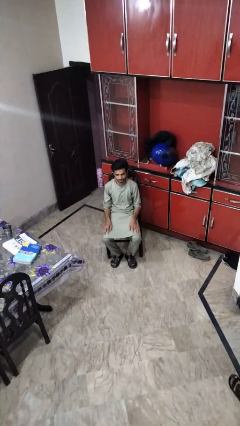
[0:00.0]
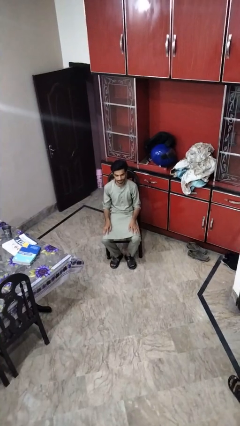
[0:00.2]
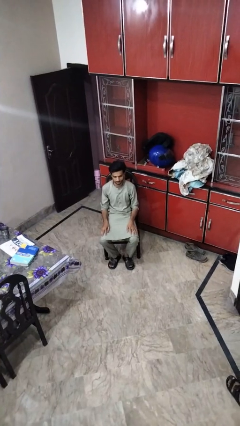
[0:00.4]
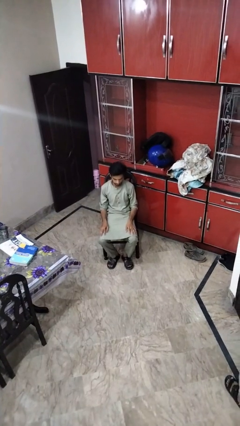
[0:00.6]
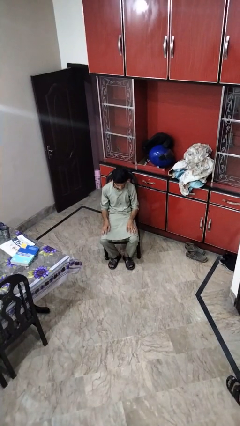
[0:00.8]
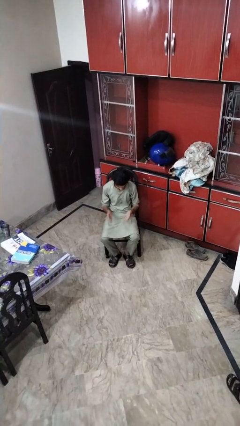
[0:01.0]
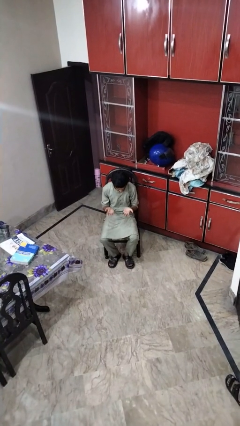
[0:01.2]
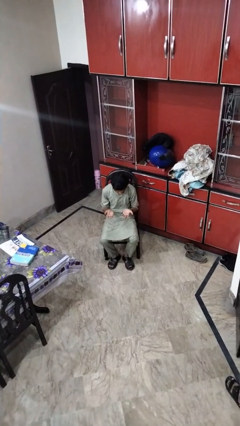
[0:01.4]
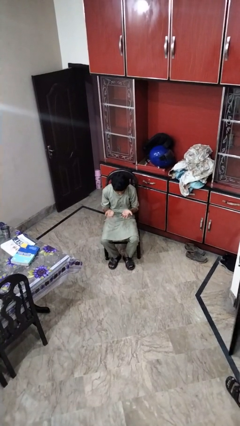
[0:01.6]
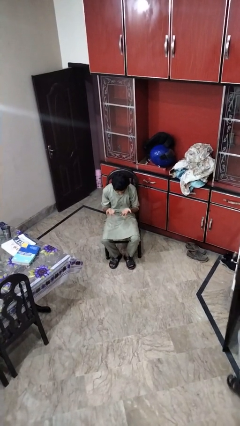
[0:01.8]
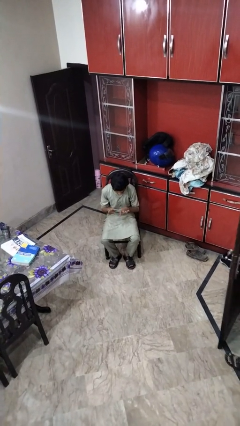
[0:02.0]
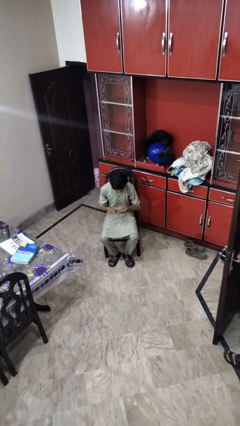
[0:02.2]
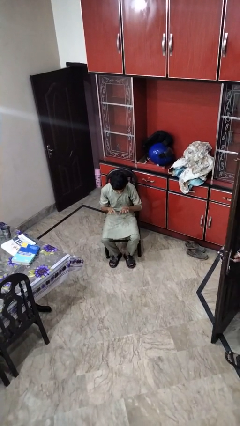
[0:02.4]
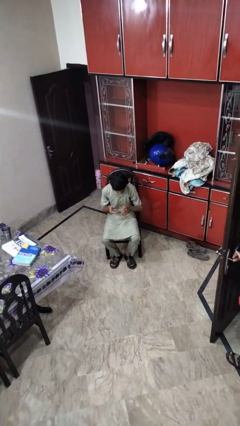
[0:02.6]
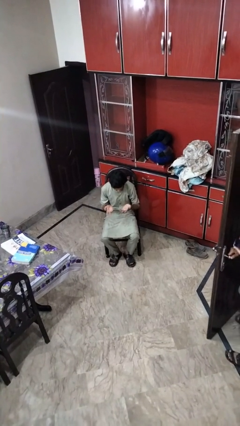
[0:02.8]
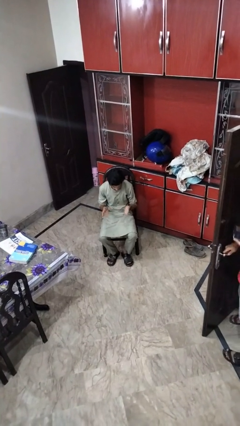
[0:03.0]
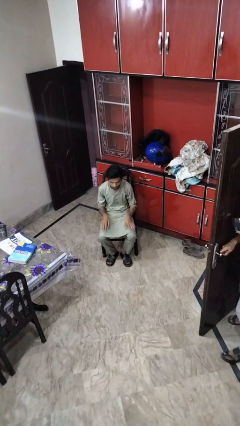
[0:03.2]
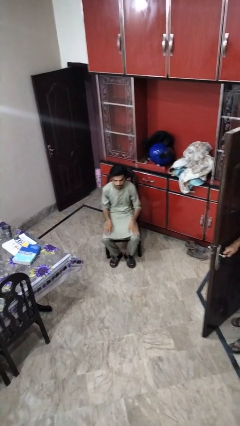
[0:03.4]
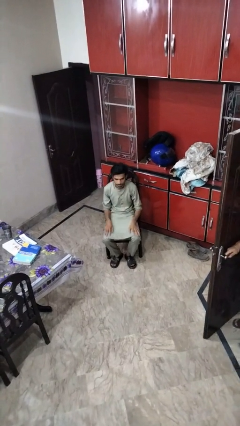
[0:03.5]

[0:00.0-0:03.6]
person looks at hands in lap

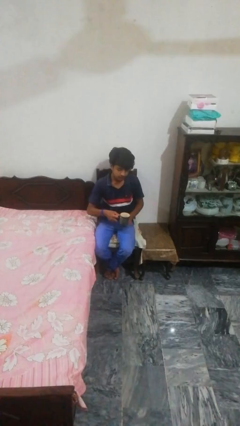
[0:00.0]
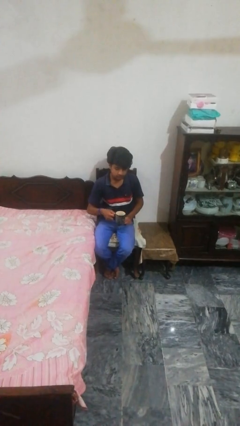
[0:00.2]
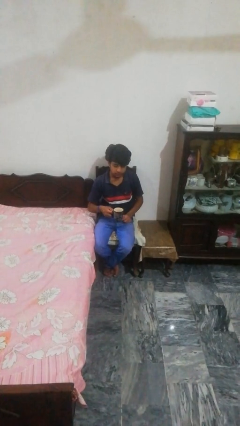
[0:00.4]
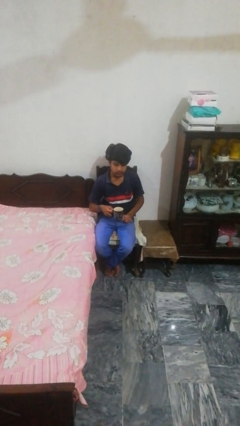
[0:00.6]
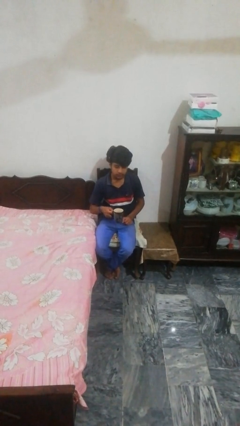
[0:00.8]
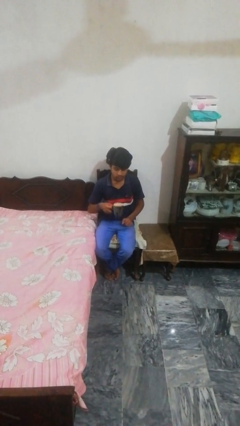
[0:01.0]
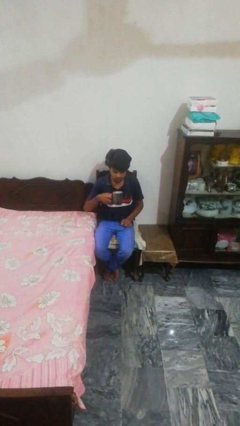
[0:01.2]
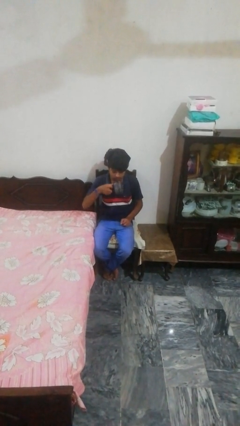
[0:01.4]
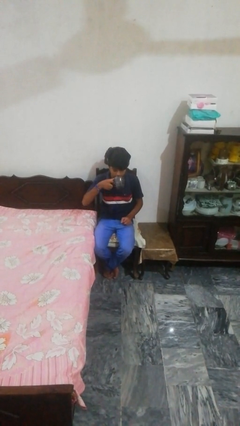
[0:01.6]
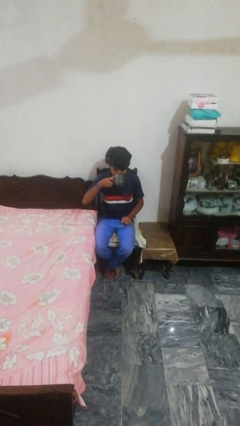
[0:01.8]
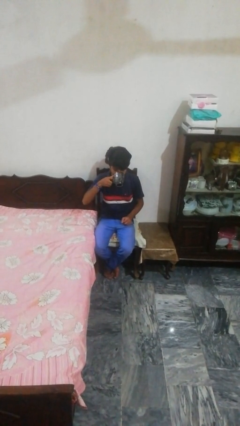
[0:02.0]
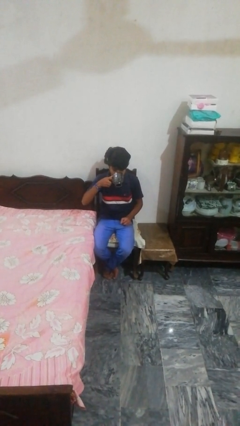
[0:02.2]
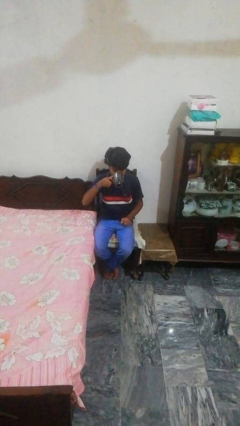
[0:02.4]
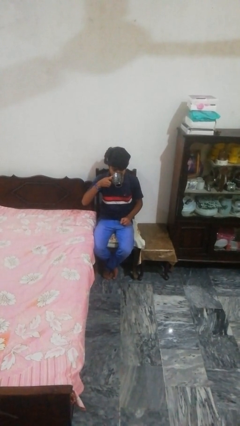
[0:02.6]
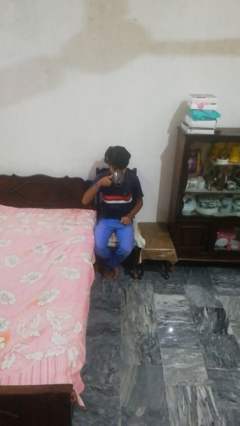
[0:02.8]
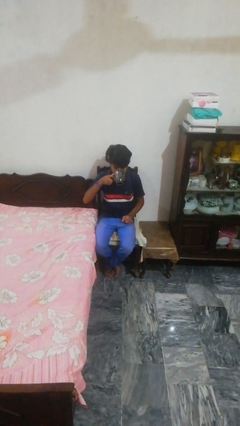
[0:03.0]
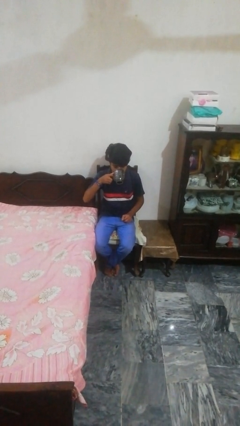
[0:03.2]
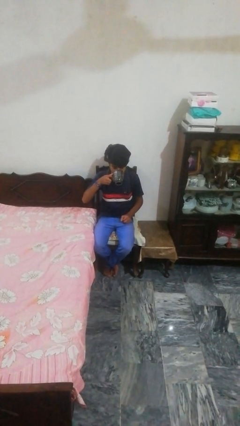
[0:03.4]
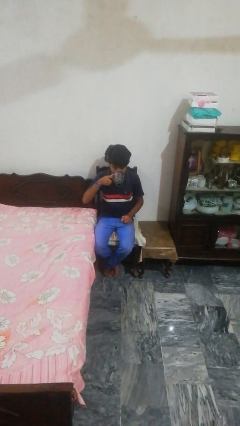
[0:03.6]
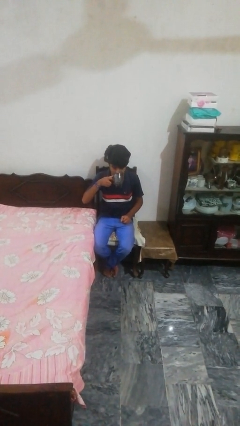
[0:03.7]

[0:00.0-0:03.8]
person drinks from mug

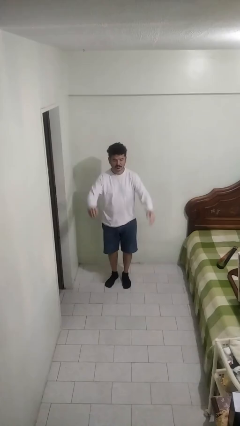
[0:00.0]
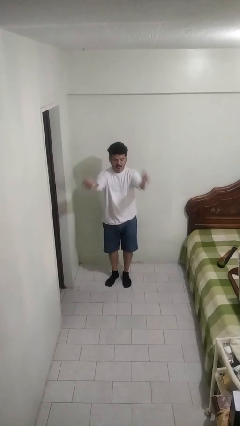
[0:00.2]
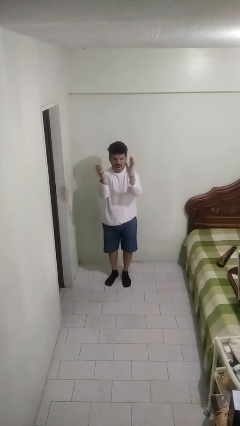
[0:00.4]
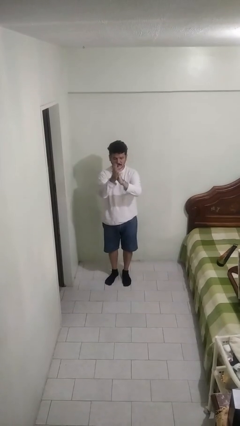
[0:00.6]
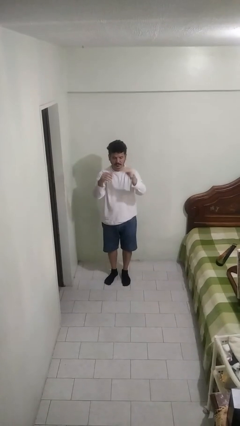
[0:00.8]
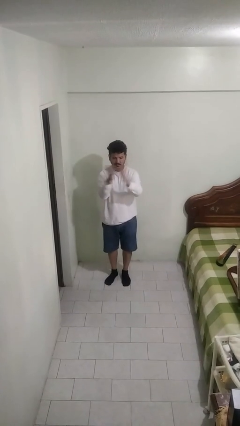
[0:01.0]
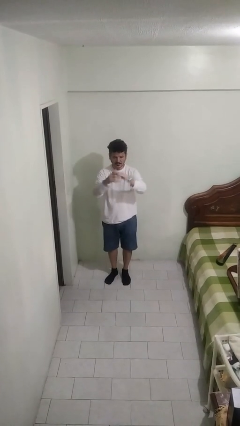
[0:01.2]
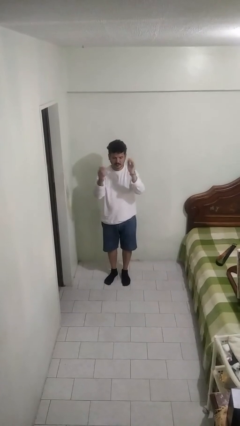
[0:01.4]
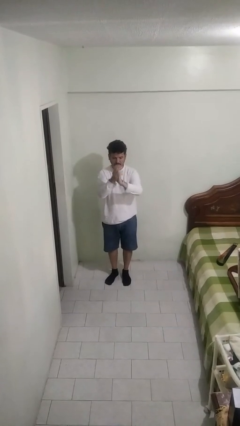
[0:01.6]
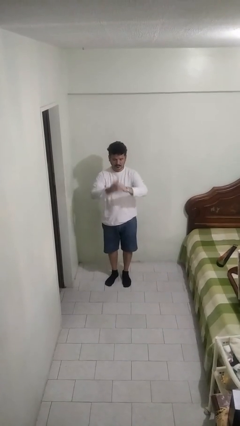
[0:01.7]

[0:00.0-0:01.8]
person claps hands

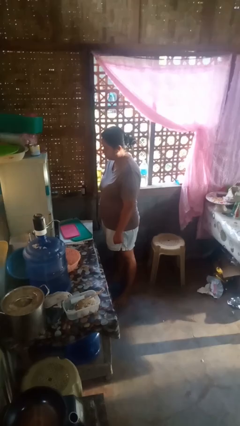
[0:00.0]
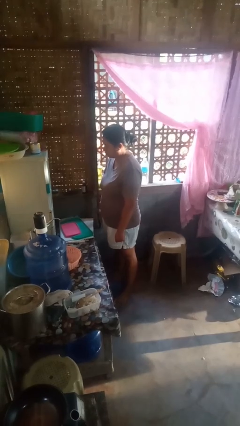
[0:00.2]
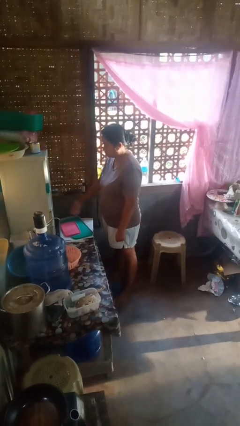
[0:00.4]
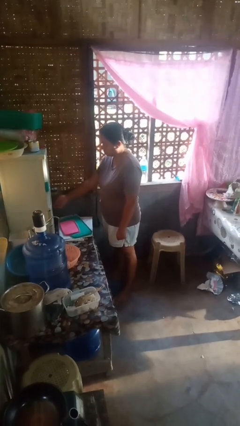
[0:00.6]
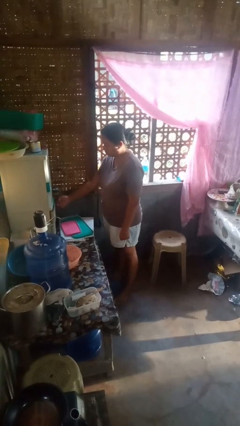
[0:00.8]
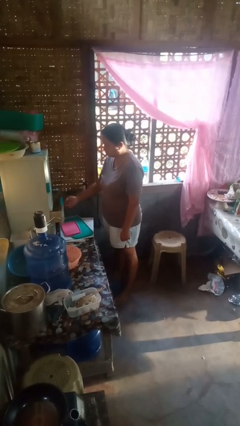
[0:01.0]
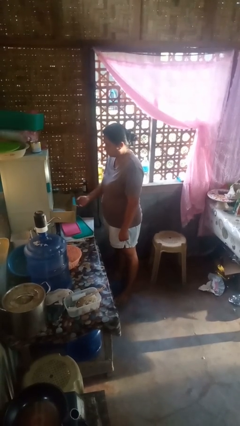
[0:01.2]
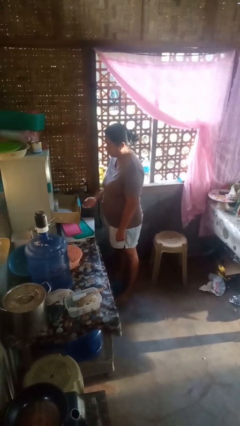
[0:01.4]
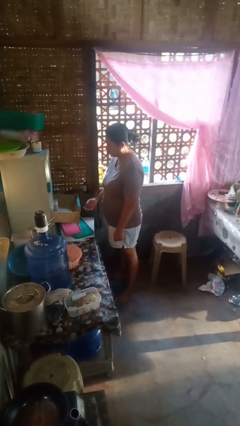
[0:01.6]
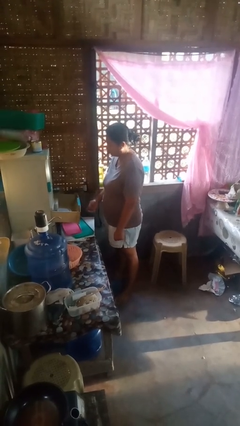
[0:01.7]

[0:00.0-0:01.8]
person opens kitchen drawer

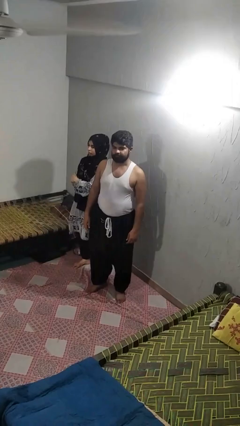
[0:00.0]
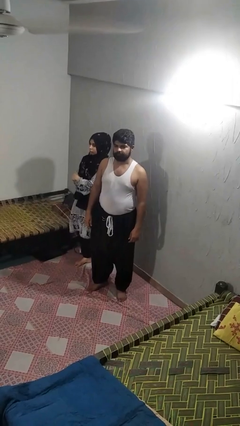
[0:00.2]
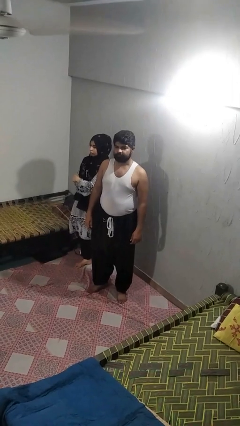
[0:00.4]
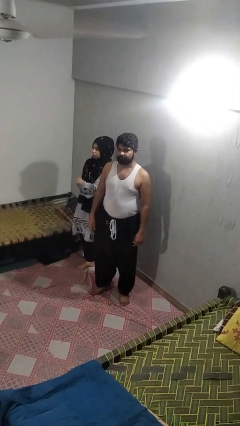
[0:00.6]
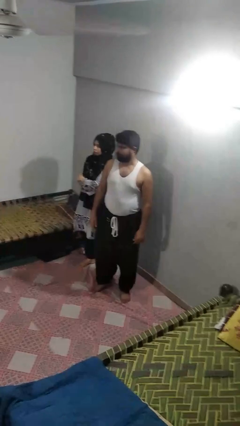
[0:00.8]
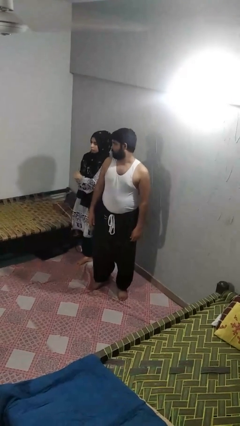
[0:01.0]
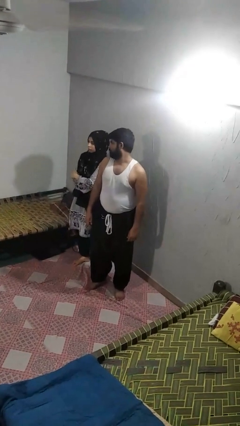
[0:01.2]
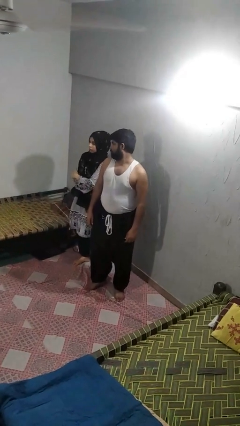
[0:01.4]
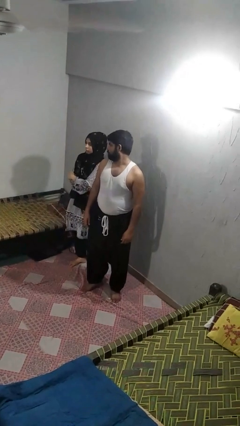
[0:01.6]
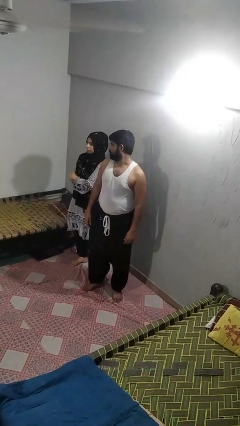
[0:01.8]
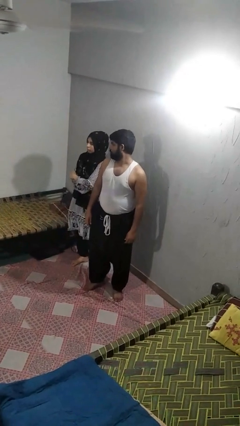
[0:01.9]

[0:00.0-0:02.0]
person looks over shoulder

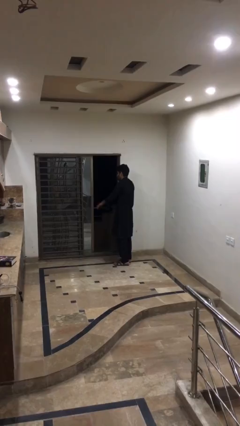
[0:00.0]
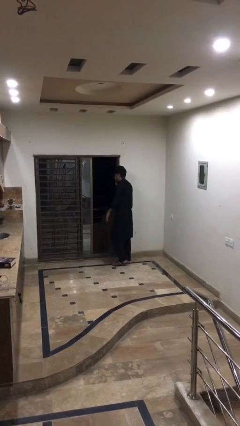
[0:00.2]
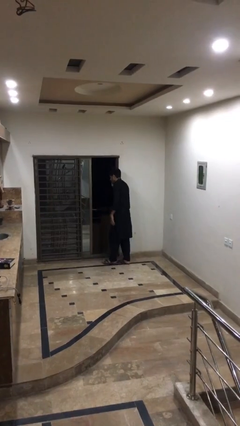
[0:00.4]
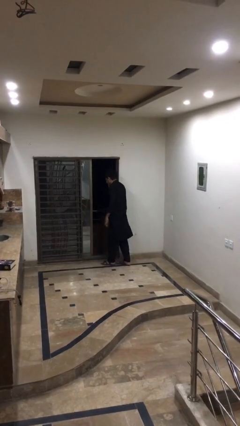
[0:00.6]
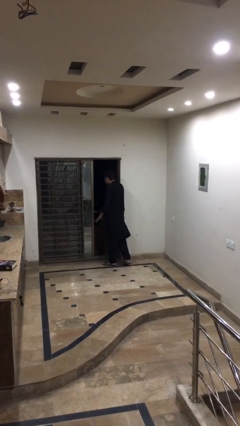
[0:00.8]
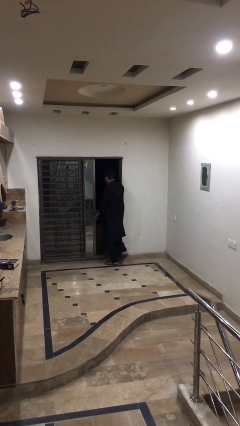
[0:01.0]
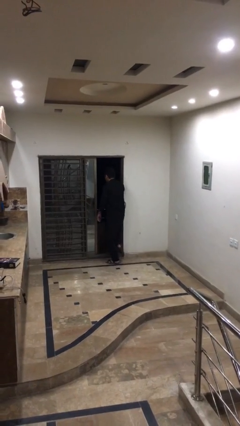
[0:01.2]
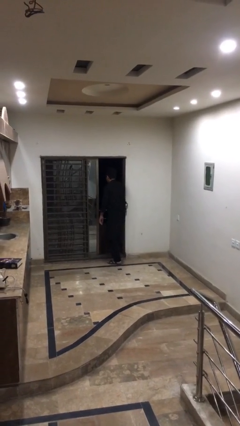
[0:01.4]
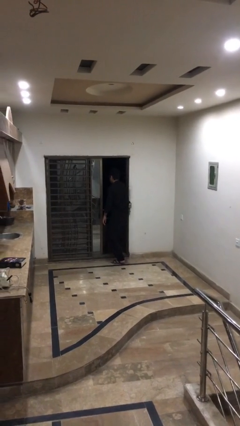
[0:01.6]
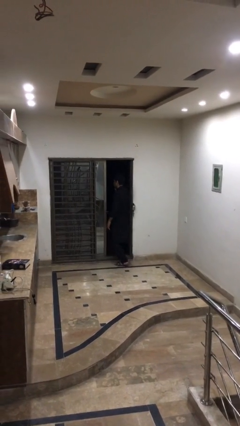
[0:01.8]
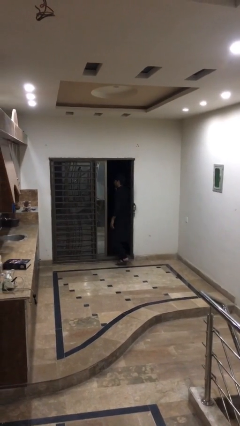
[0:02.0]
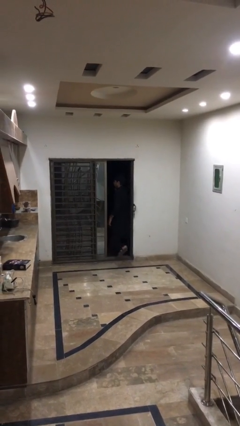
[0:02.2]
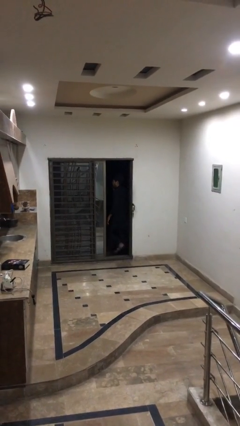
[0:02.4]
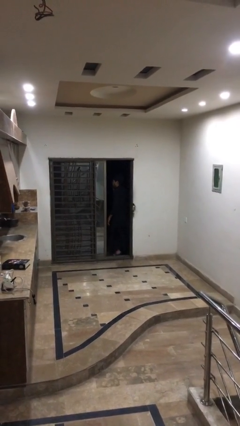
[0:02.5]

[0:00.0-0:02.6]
person exits scene through structure

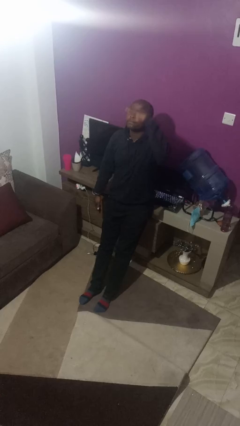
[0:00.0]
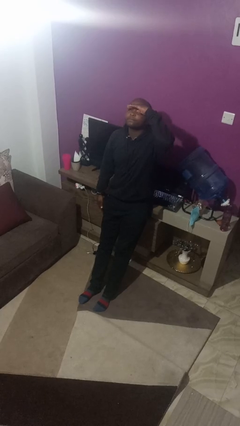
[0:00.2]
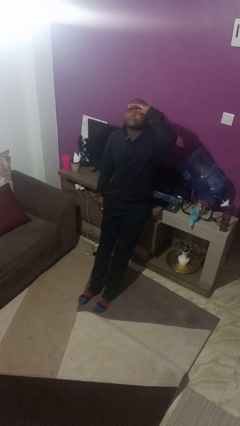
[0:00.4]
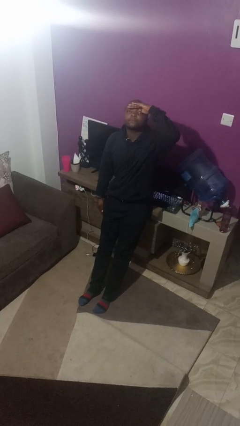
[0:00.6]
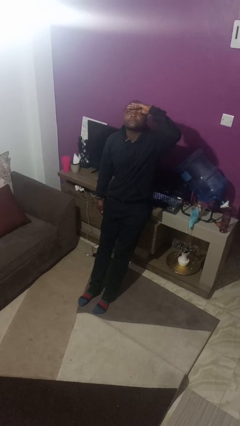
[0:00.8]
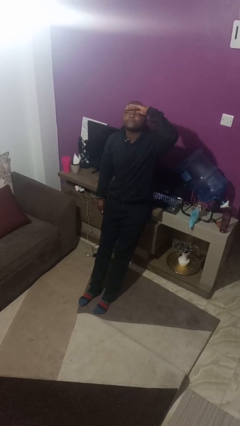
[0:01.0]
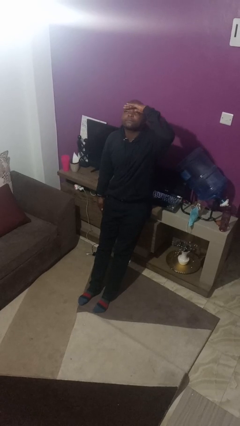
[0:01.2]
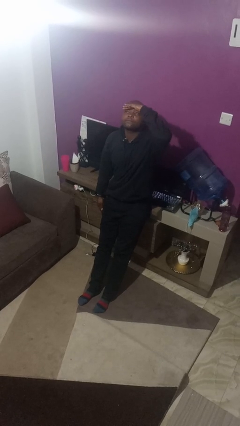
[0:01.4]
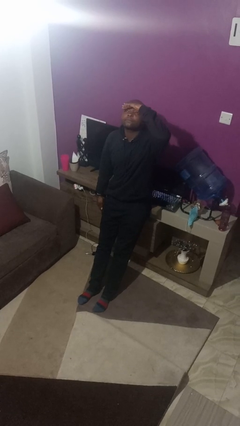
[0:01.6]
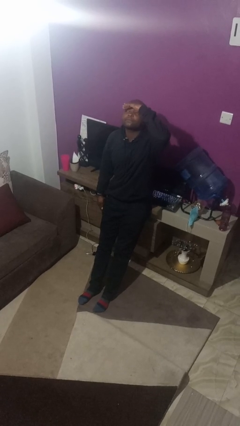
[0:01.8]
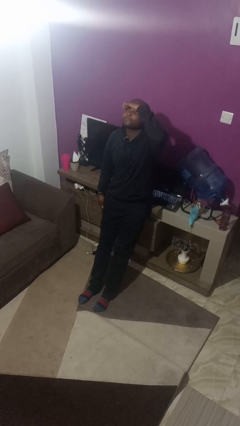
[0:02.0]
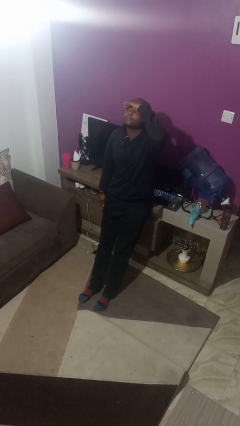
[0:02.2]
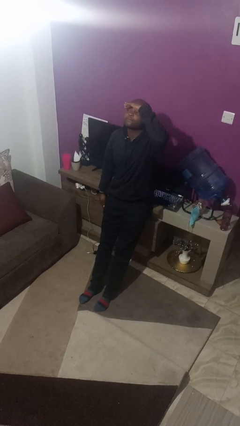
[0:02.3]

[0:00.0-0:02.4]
person shades eyes
